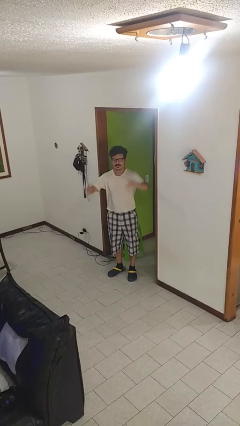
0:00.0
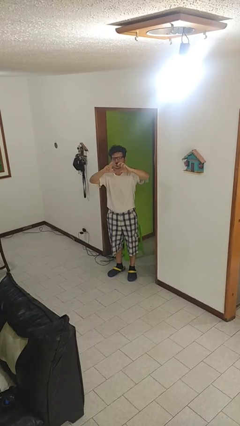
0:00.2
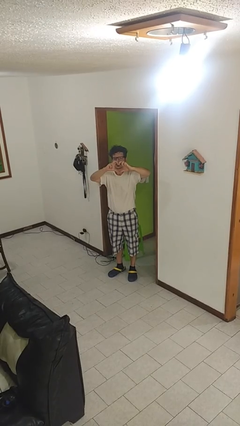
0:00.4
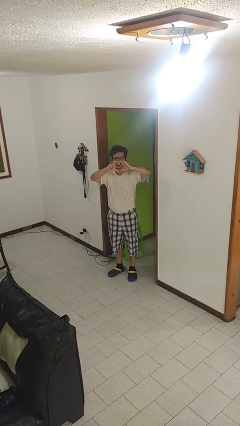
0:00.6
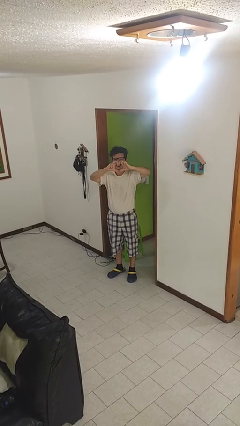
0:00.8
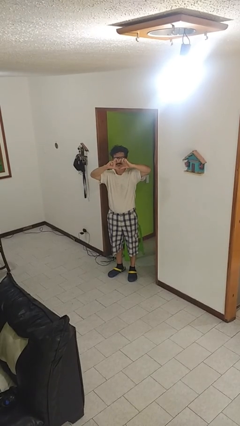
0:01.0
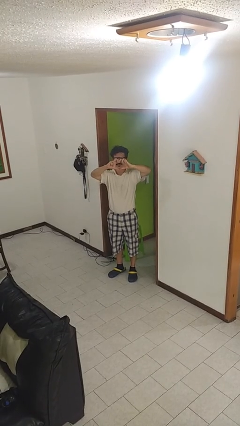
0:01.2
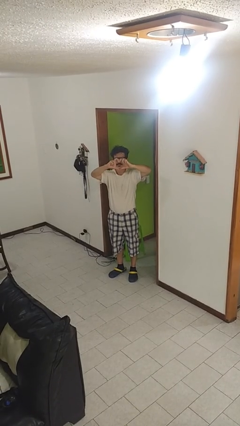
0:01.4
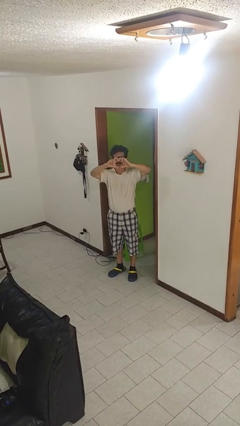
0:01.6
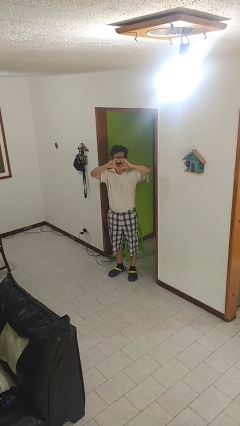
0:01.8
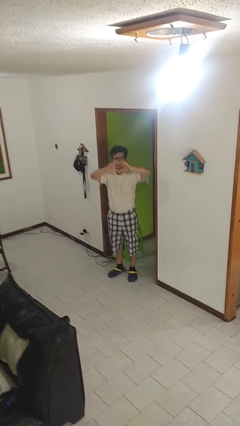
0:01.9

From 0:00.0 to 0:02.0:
person gestures heart

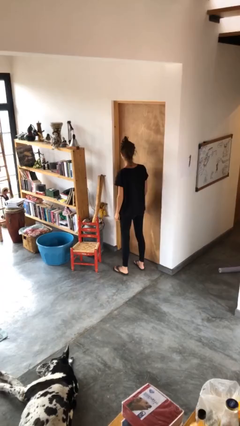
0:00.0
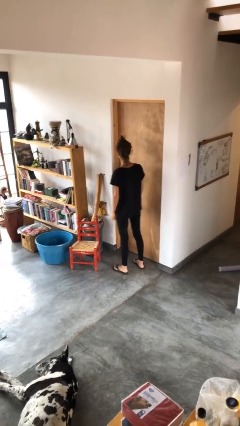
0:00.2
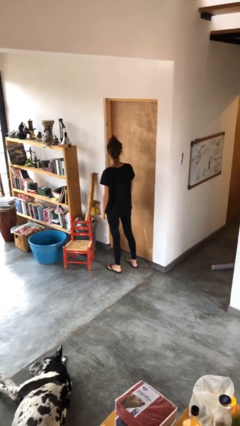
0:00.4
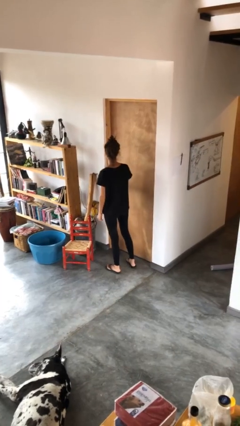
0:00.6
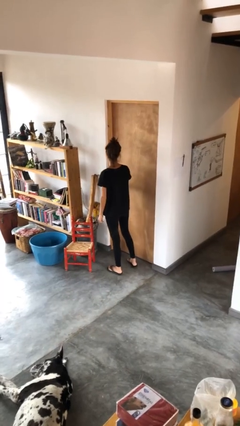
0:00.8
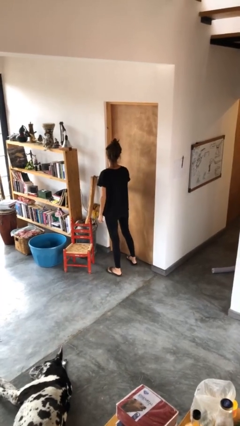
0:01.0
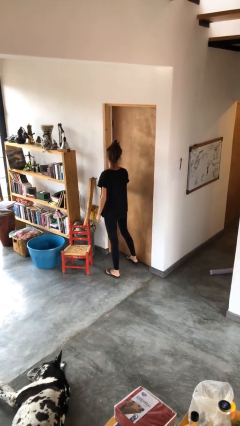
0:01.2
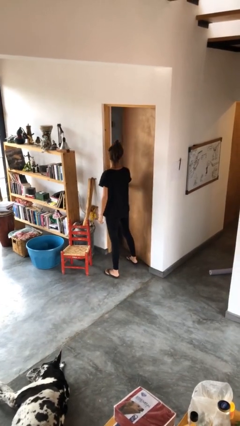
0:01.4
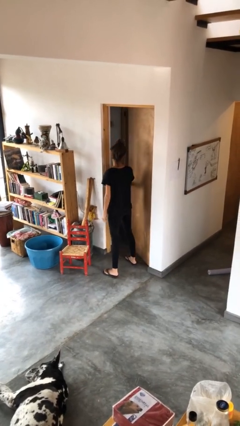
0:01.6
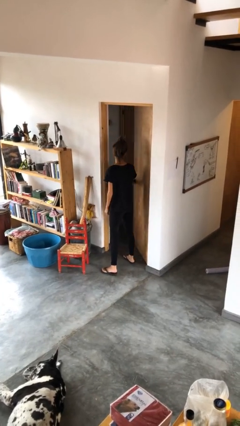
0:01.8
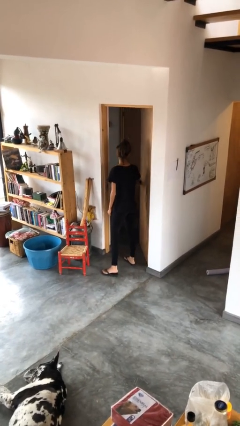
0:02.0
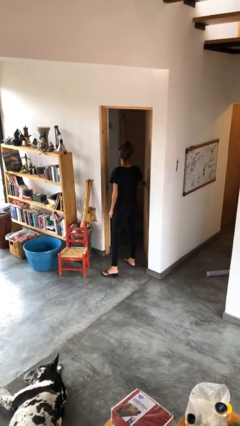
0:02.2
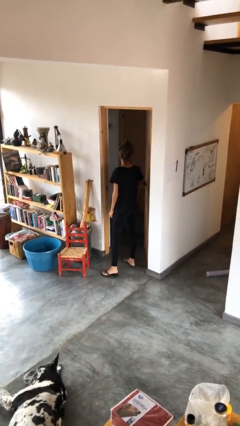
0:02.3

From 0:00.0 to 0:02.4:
person opens facility door

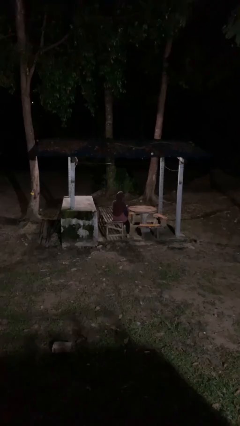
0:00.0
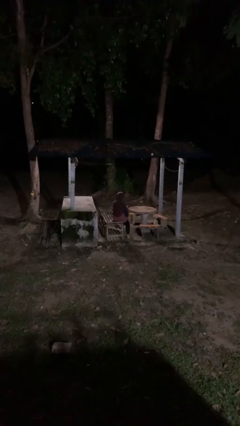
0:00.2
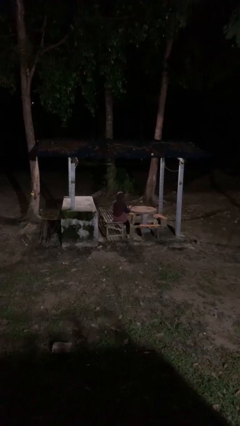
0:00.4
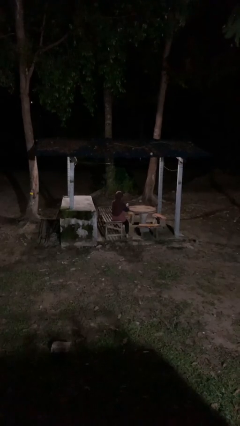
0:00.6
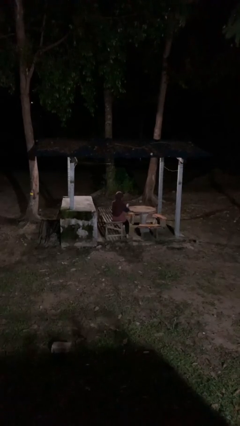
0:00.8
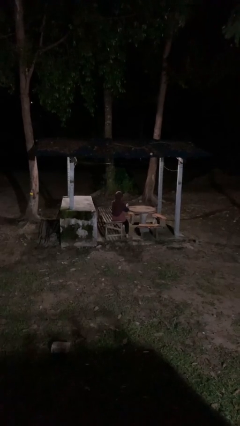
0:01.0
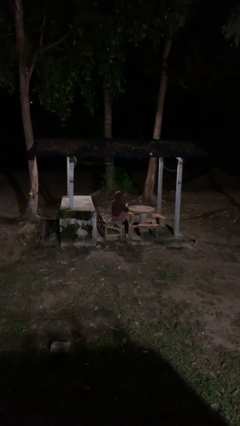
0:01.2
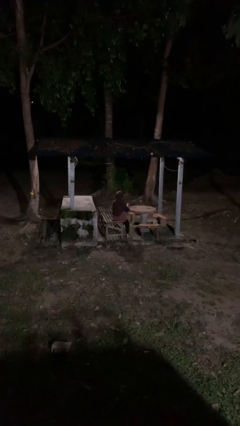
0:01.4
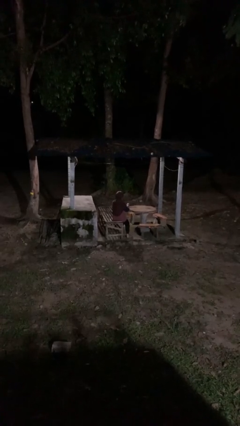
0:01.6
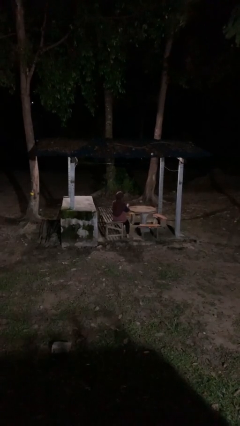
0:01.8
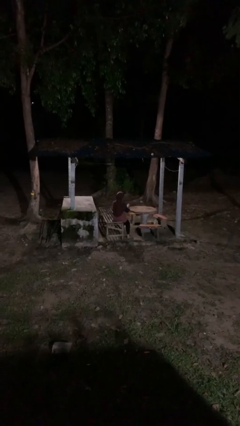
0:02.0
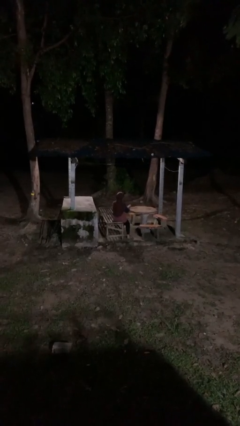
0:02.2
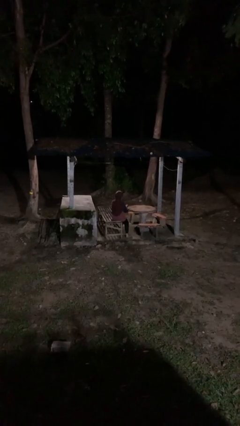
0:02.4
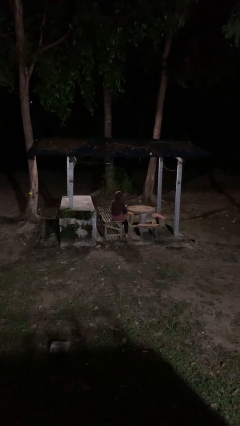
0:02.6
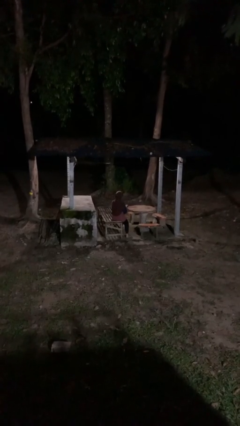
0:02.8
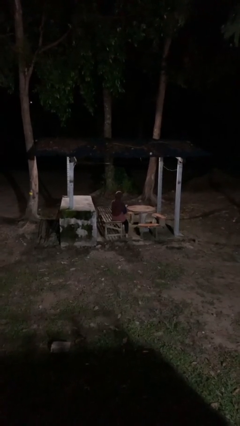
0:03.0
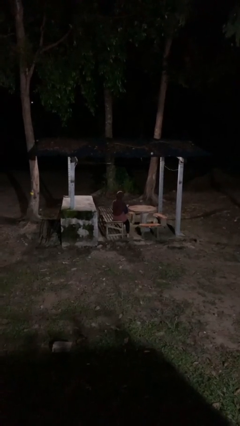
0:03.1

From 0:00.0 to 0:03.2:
person paints fingernails

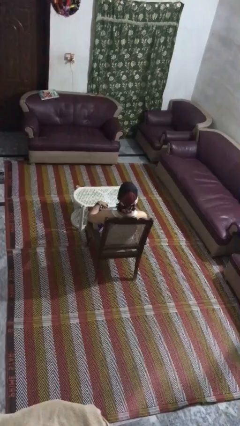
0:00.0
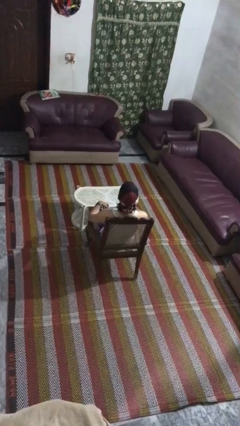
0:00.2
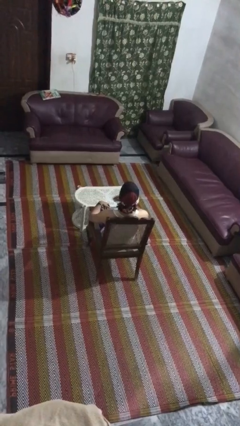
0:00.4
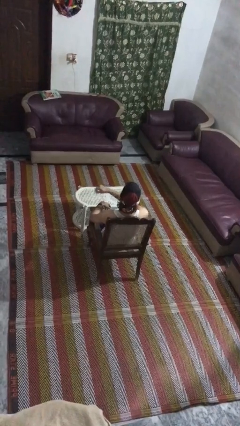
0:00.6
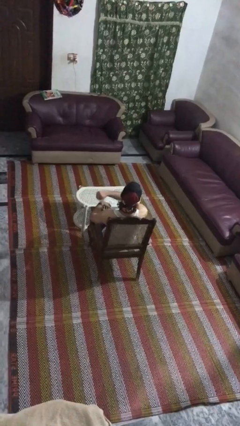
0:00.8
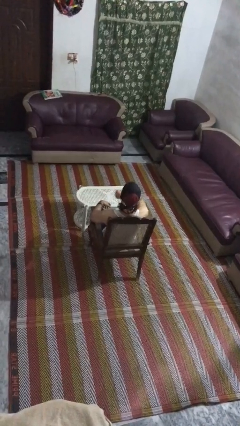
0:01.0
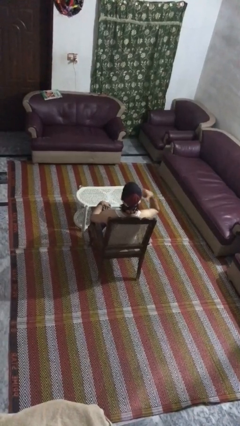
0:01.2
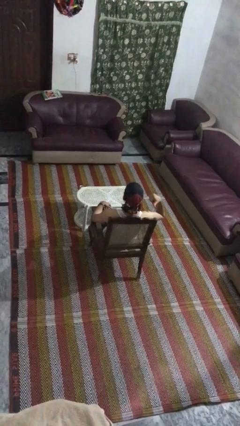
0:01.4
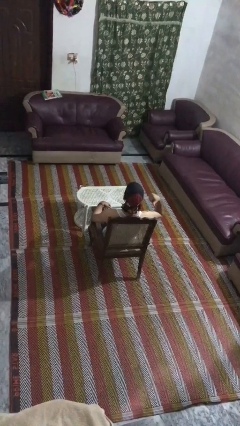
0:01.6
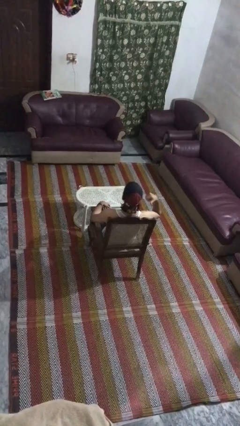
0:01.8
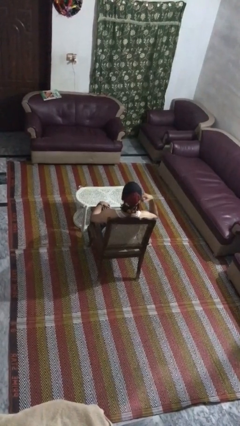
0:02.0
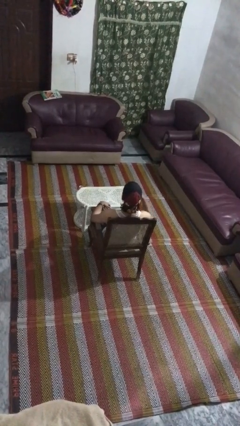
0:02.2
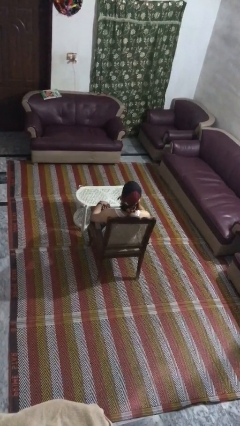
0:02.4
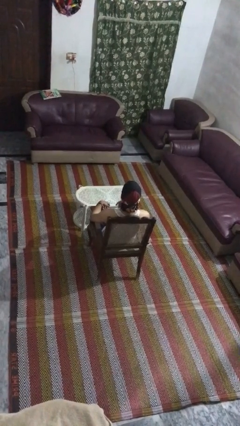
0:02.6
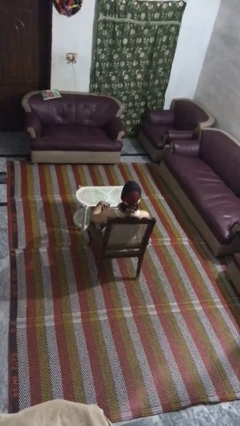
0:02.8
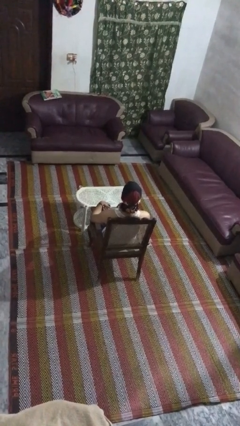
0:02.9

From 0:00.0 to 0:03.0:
person gestures cut

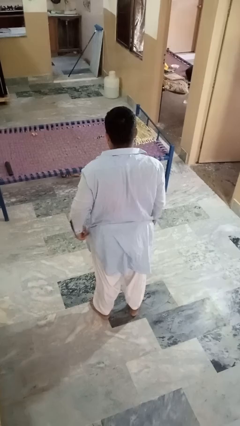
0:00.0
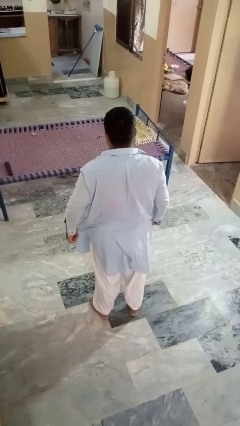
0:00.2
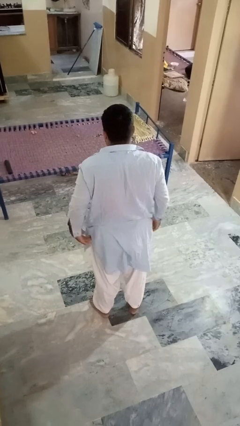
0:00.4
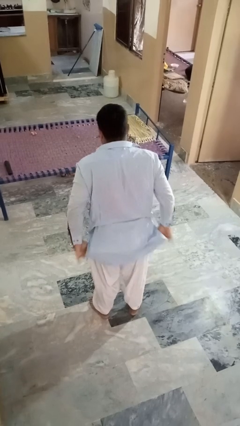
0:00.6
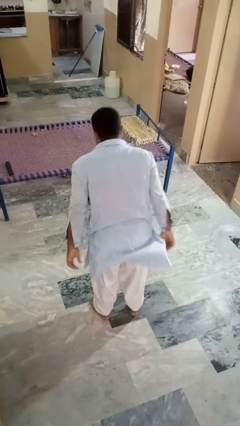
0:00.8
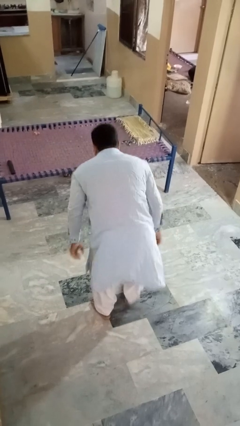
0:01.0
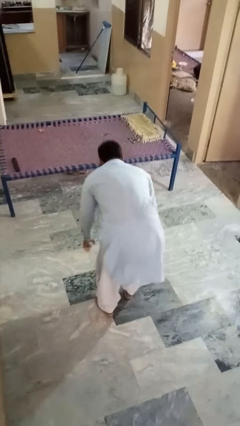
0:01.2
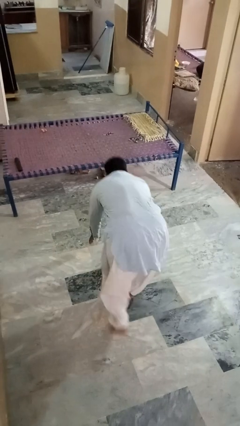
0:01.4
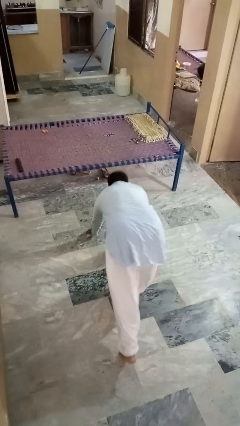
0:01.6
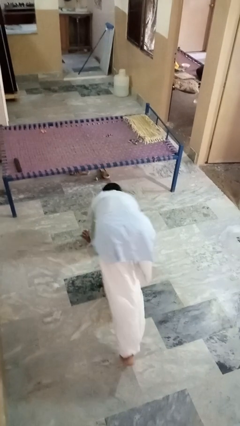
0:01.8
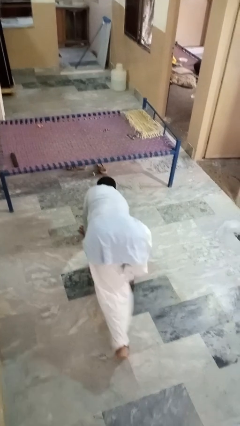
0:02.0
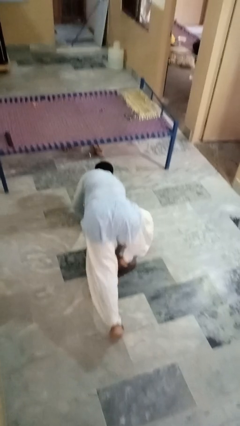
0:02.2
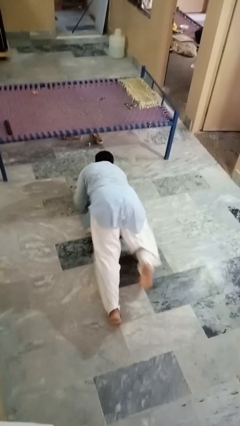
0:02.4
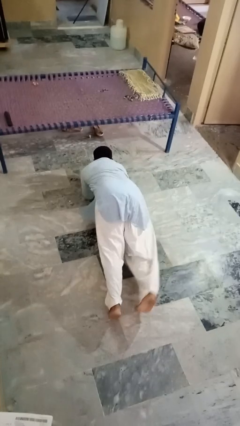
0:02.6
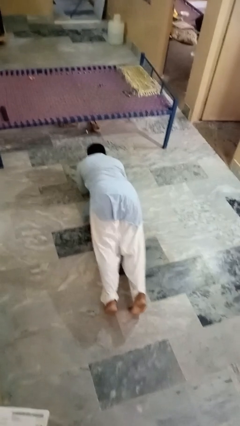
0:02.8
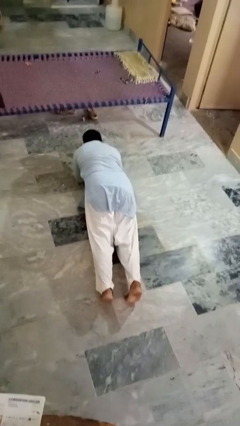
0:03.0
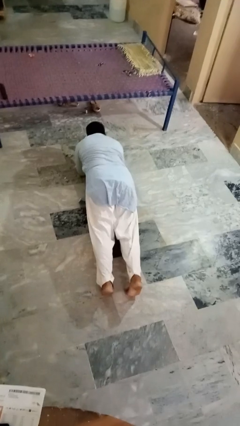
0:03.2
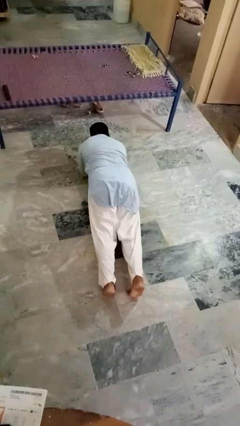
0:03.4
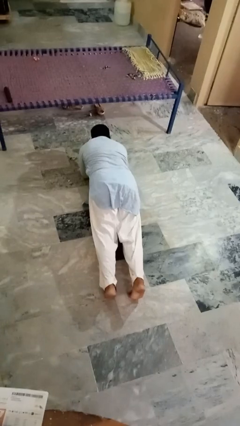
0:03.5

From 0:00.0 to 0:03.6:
person exercises with plank

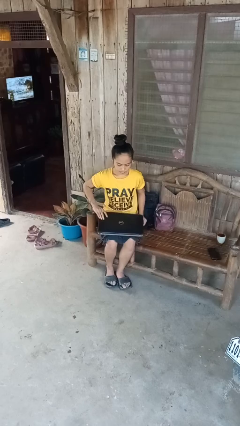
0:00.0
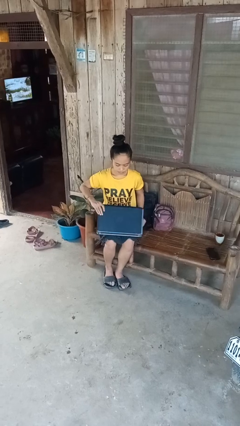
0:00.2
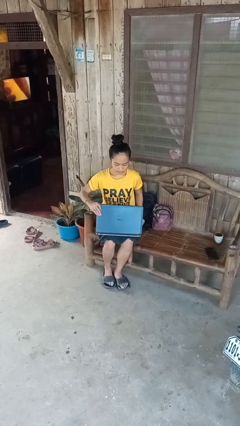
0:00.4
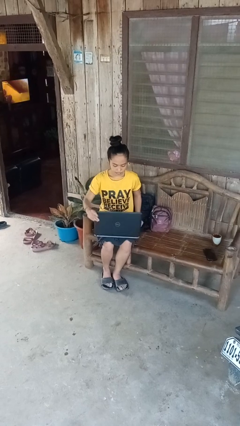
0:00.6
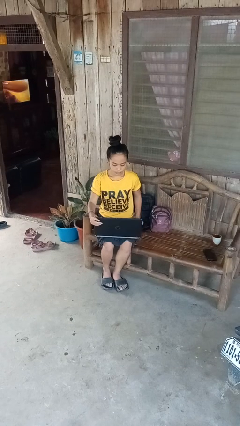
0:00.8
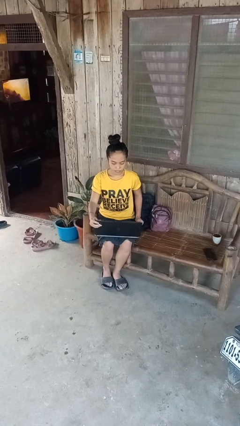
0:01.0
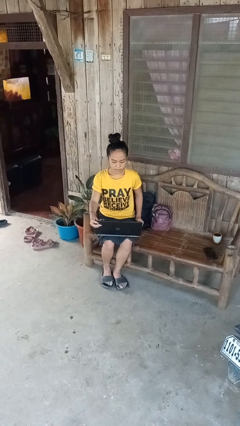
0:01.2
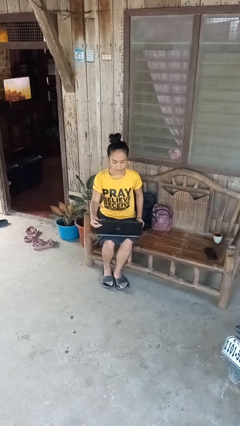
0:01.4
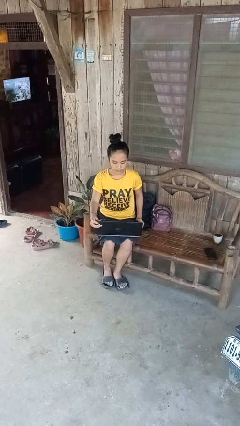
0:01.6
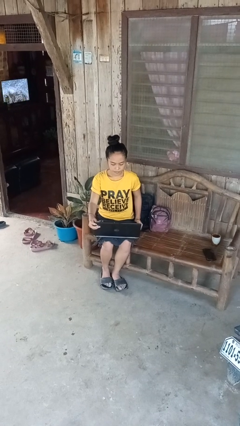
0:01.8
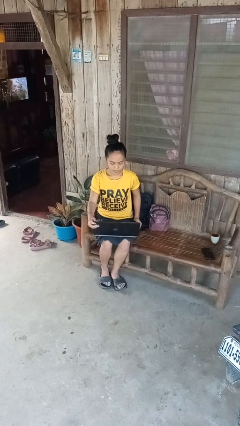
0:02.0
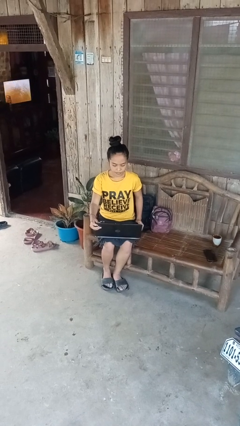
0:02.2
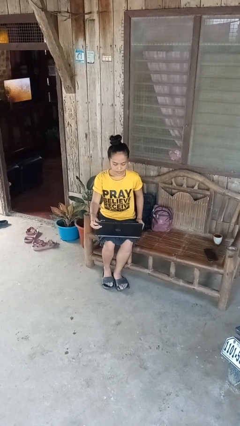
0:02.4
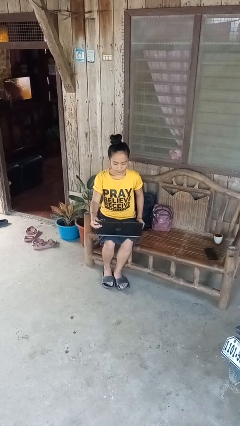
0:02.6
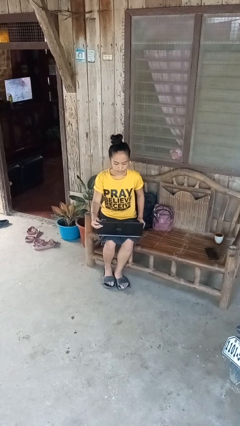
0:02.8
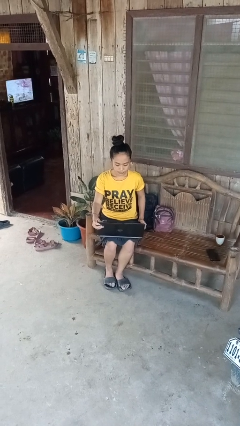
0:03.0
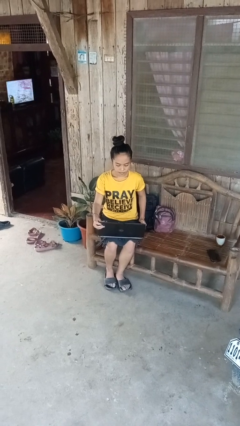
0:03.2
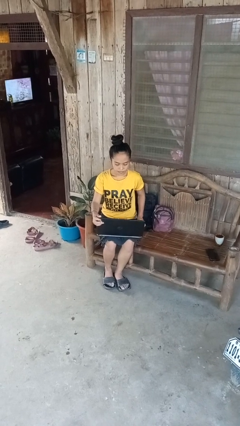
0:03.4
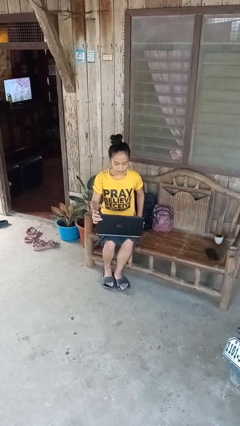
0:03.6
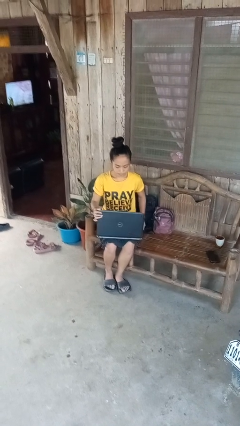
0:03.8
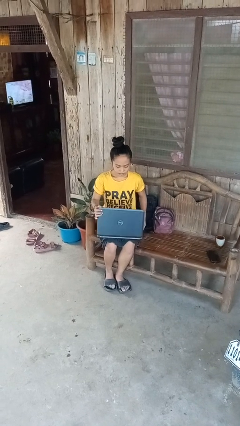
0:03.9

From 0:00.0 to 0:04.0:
person opens laptop
